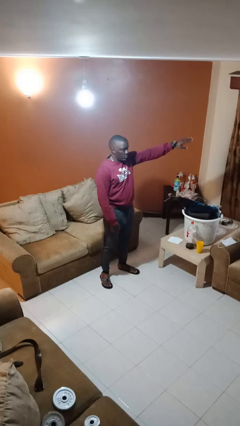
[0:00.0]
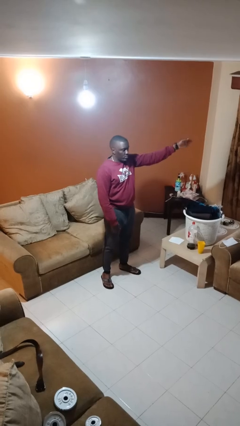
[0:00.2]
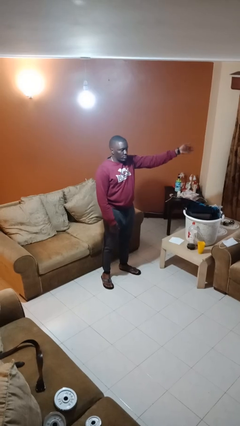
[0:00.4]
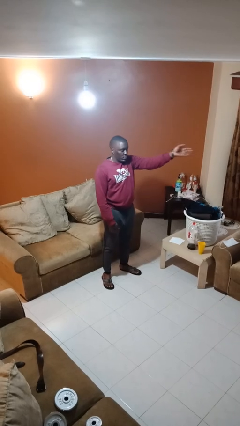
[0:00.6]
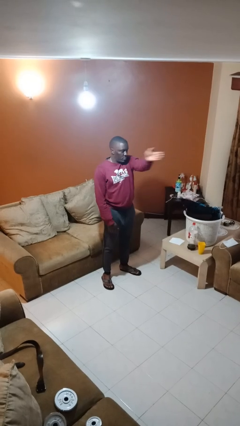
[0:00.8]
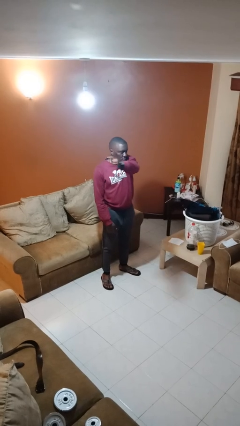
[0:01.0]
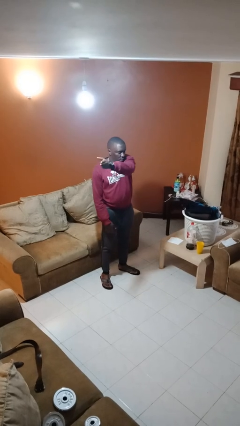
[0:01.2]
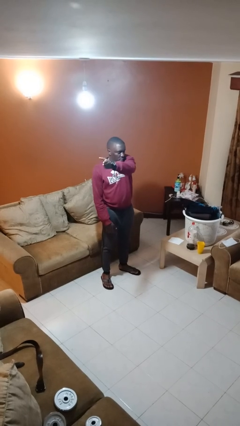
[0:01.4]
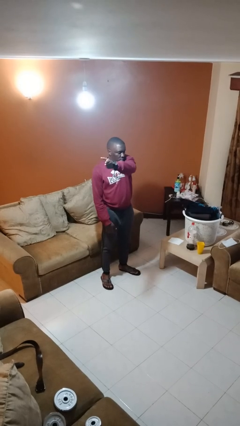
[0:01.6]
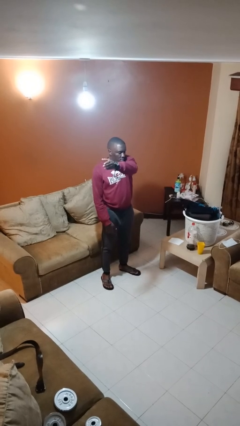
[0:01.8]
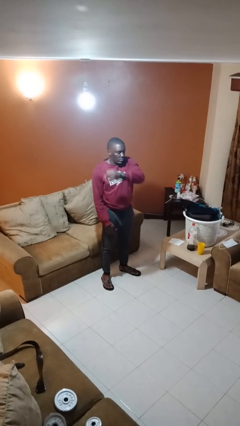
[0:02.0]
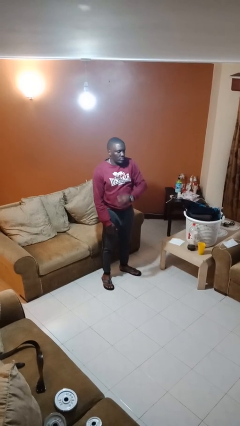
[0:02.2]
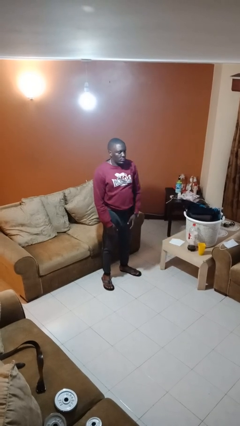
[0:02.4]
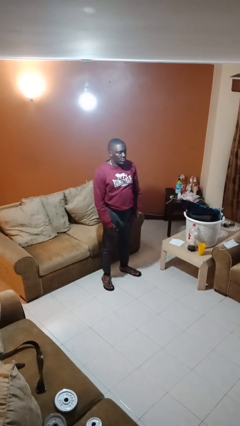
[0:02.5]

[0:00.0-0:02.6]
person gestures swipe right

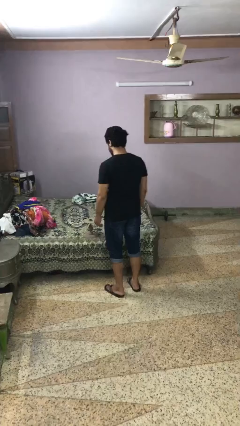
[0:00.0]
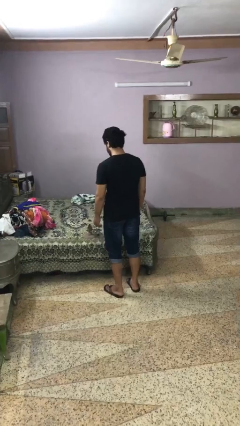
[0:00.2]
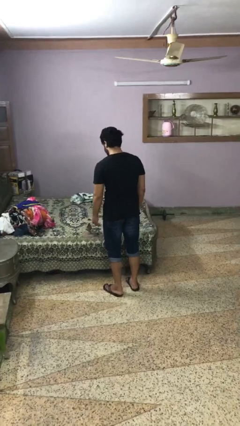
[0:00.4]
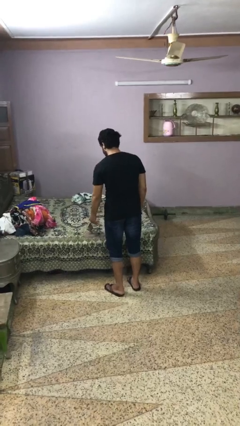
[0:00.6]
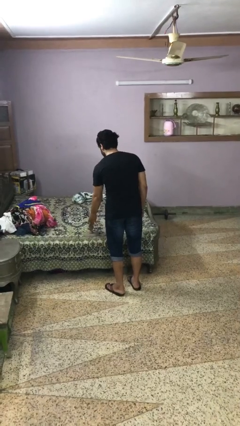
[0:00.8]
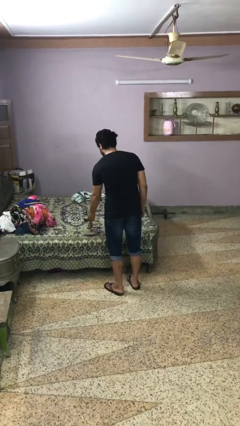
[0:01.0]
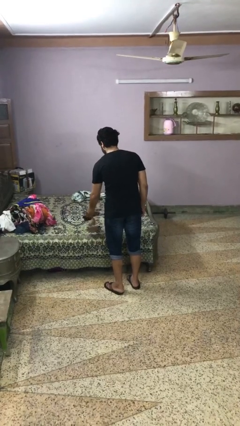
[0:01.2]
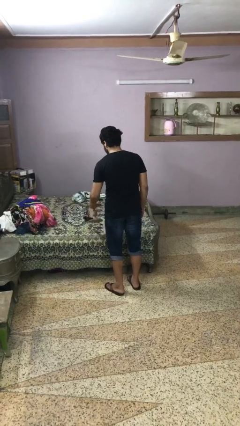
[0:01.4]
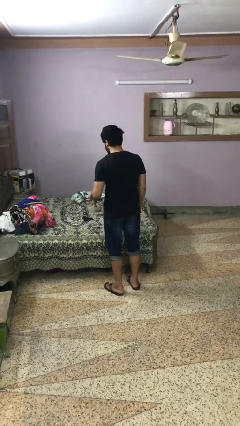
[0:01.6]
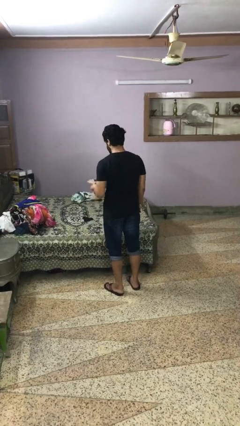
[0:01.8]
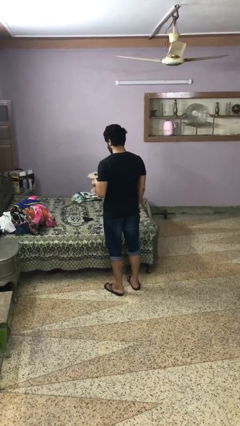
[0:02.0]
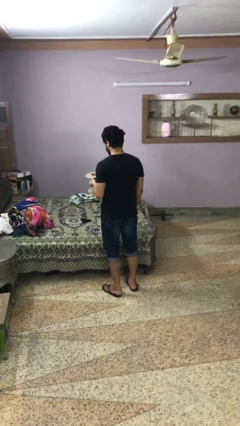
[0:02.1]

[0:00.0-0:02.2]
person picks up object from bed

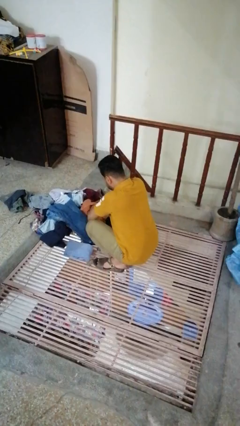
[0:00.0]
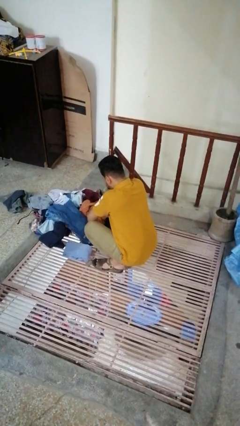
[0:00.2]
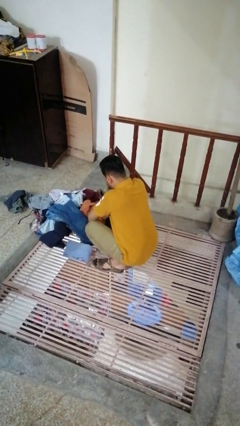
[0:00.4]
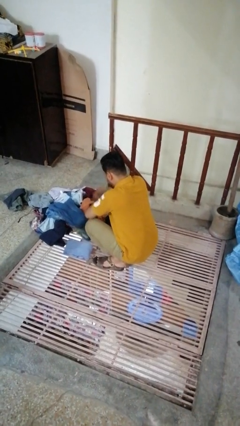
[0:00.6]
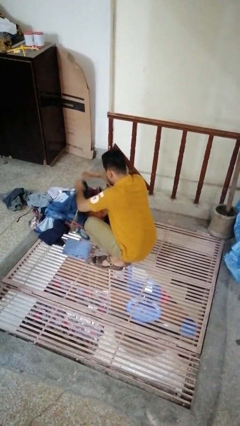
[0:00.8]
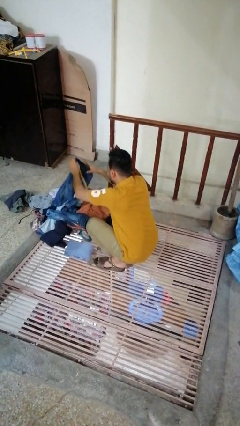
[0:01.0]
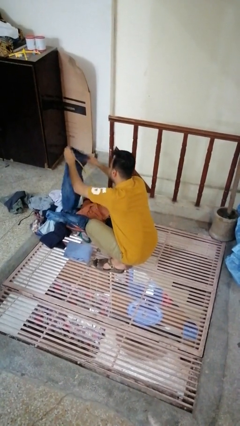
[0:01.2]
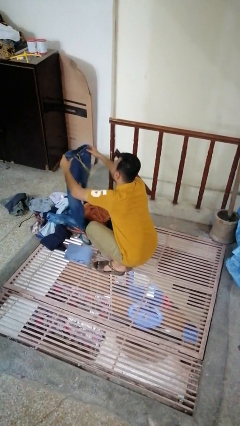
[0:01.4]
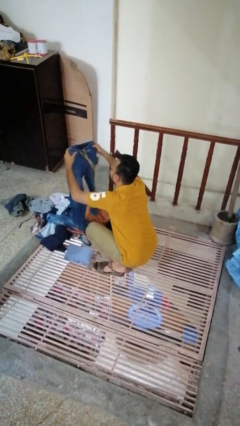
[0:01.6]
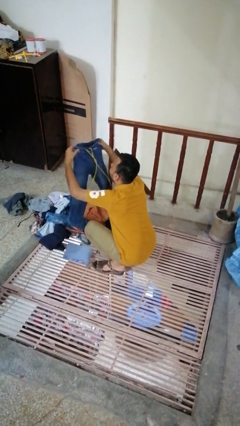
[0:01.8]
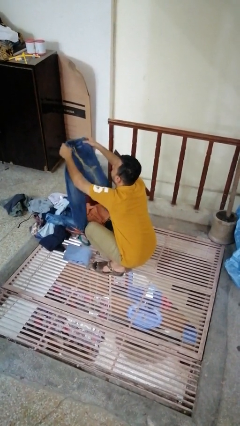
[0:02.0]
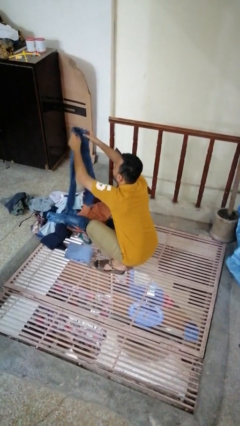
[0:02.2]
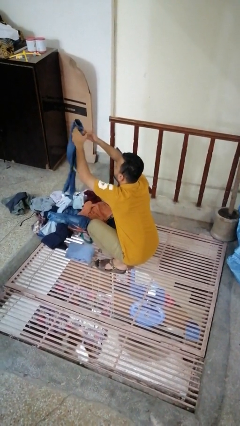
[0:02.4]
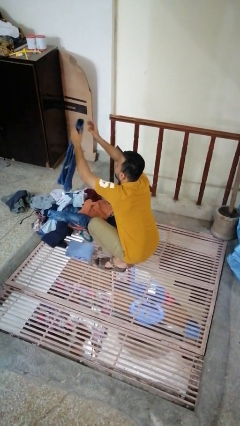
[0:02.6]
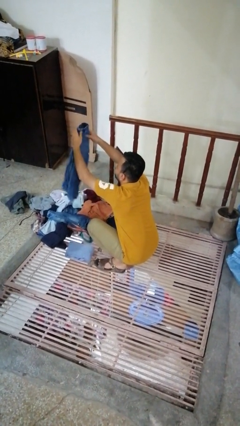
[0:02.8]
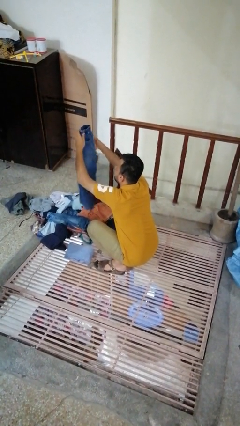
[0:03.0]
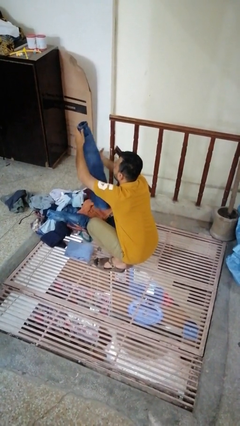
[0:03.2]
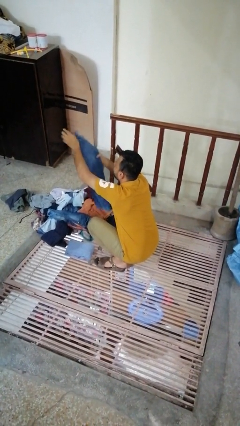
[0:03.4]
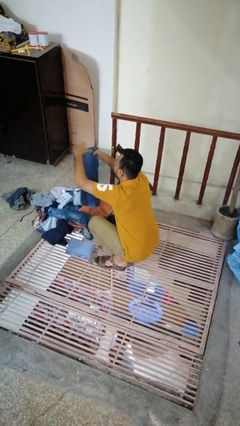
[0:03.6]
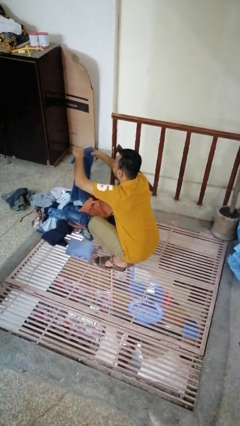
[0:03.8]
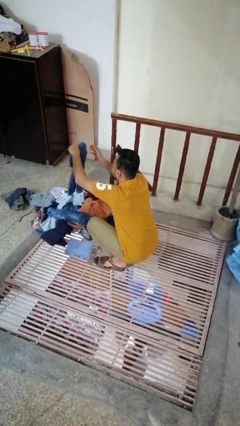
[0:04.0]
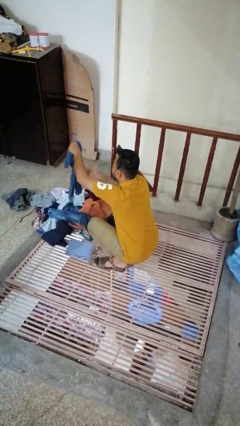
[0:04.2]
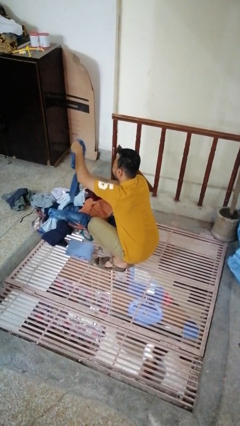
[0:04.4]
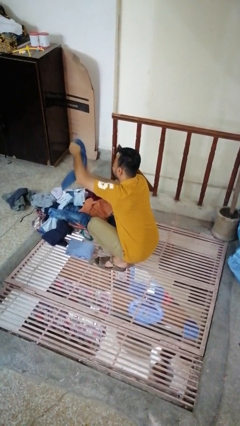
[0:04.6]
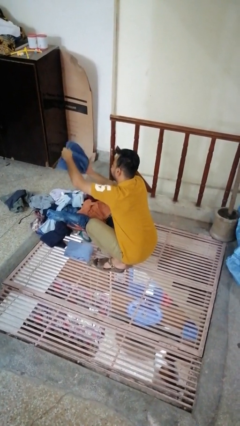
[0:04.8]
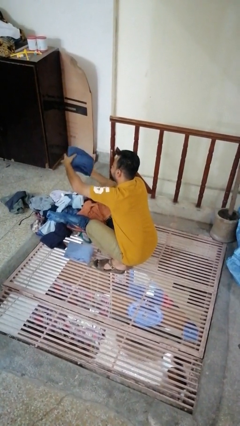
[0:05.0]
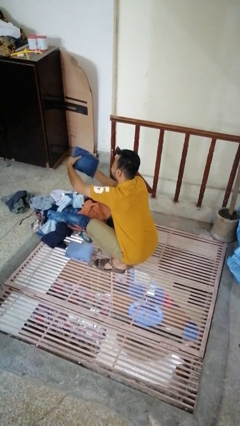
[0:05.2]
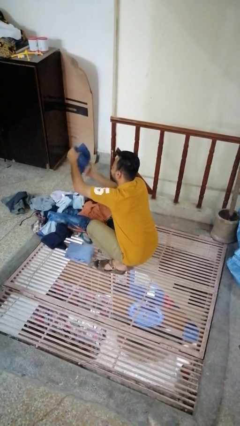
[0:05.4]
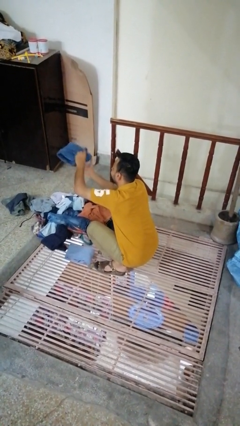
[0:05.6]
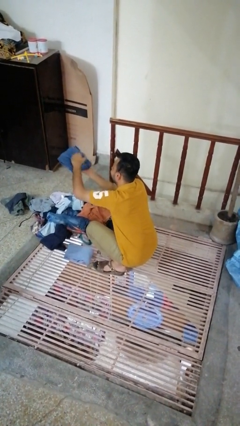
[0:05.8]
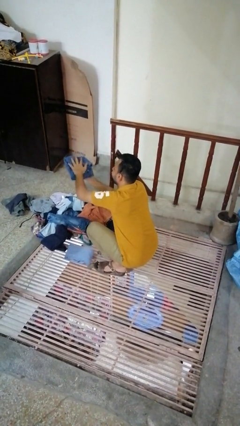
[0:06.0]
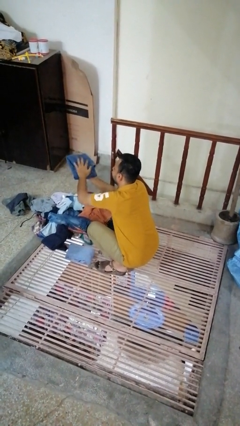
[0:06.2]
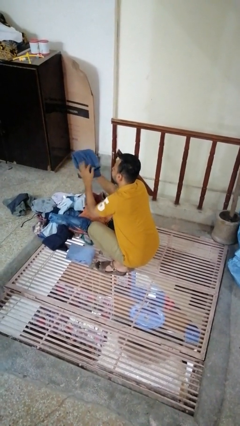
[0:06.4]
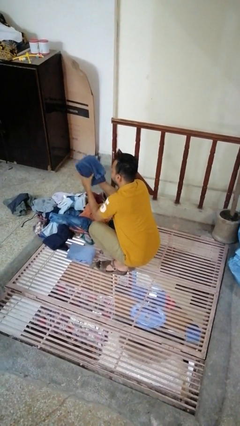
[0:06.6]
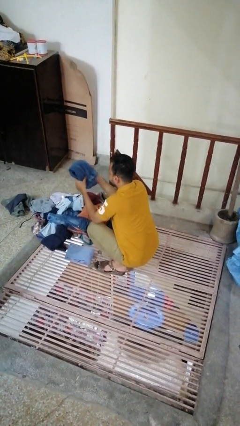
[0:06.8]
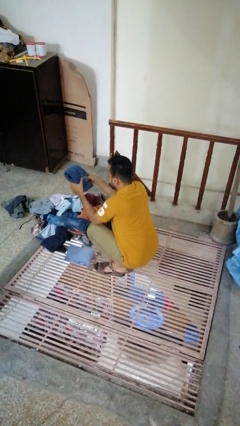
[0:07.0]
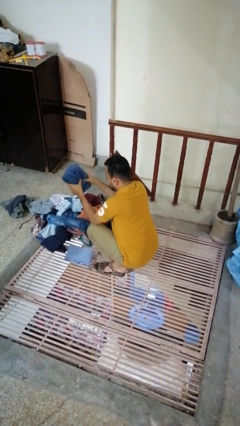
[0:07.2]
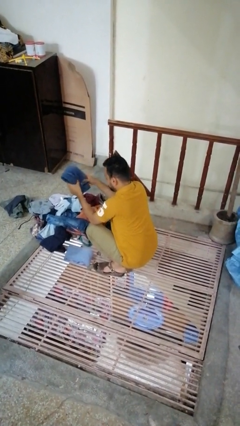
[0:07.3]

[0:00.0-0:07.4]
person folds pants

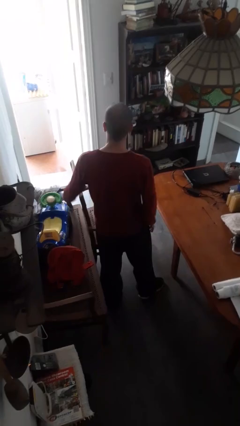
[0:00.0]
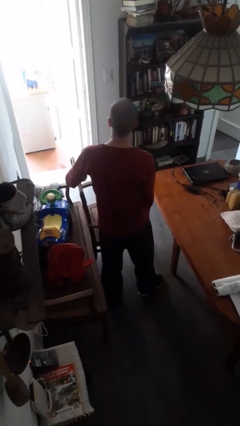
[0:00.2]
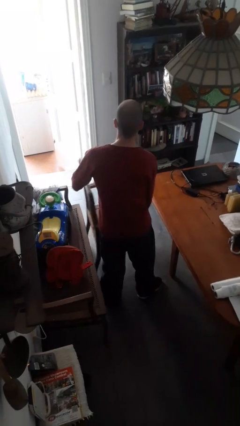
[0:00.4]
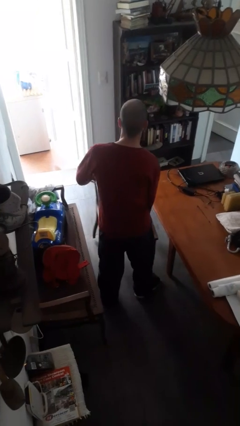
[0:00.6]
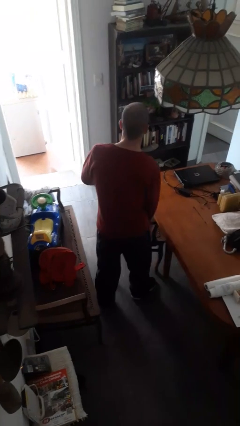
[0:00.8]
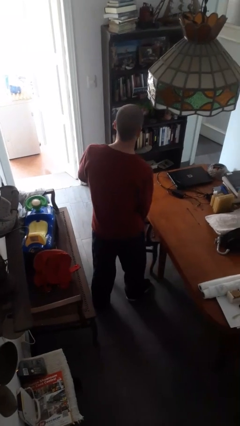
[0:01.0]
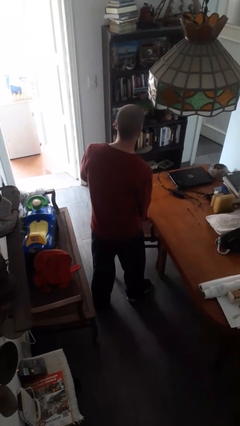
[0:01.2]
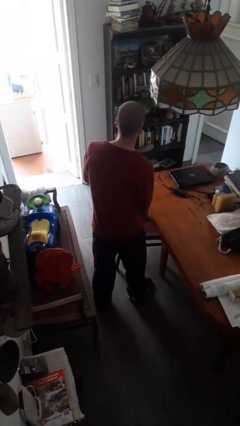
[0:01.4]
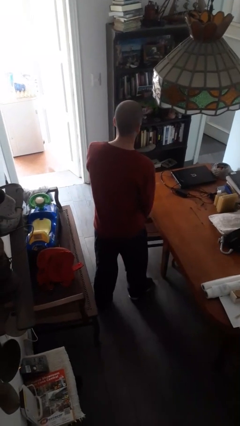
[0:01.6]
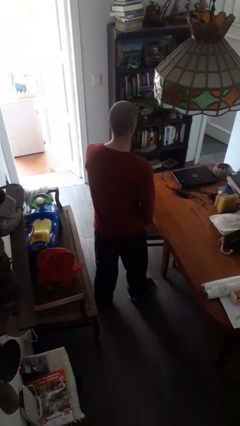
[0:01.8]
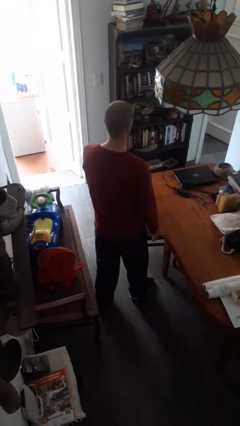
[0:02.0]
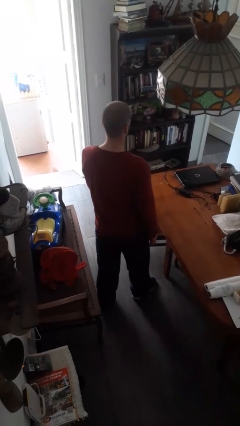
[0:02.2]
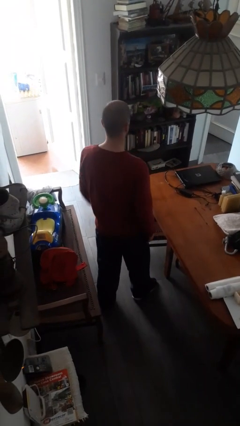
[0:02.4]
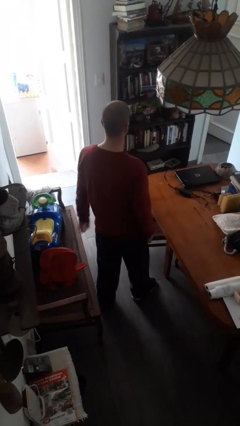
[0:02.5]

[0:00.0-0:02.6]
person pushes in chair

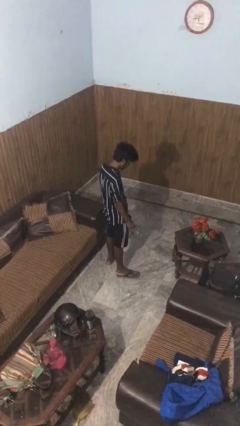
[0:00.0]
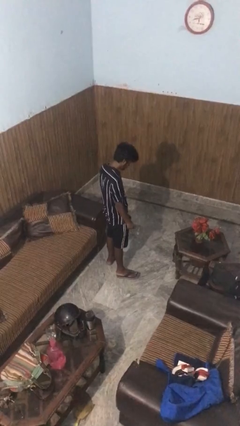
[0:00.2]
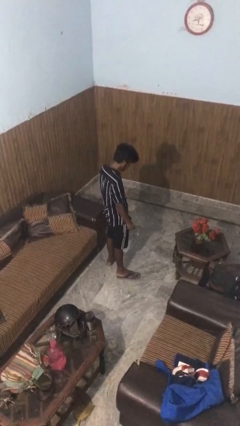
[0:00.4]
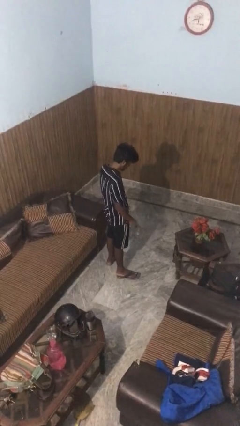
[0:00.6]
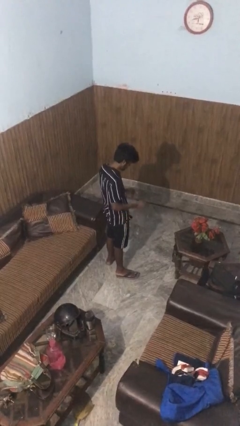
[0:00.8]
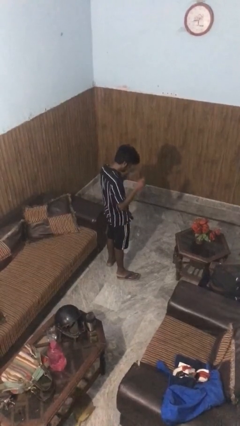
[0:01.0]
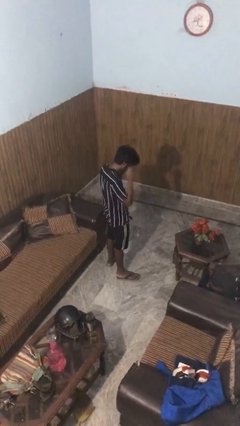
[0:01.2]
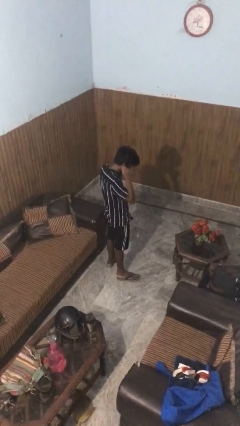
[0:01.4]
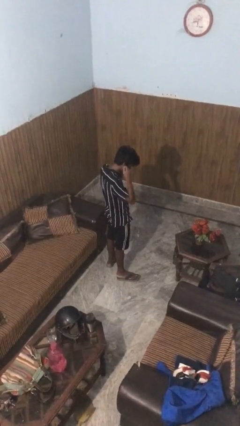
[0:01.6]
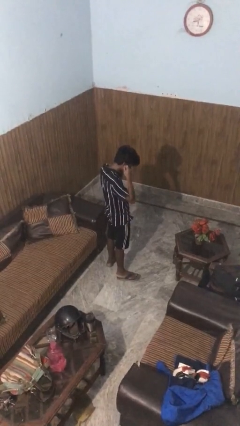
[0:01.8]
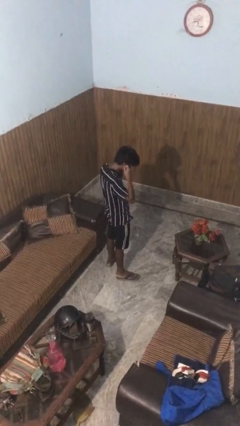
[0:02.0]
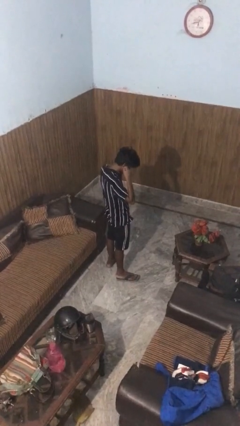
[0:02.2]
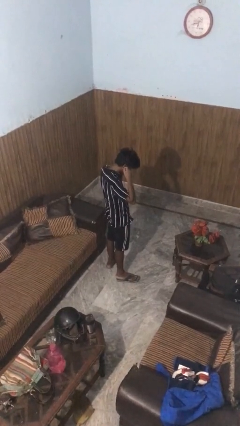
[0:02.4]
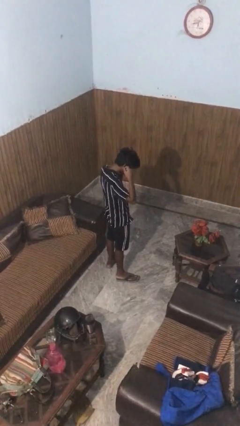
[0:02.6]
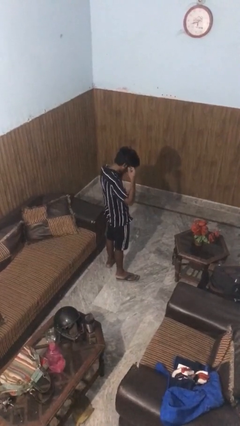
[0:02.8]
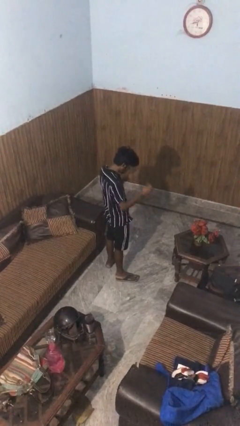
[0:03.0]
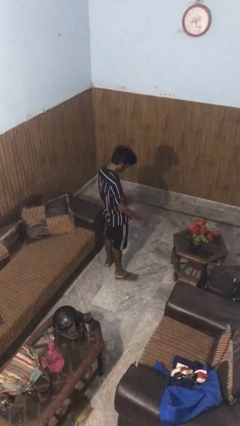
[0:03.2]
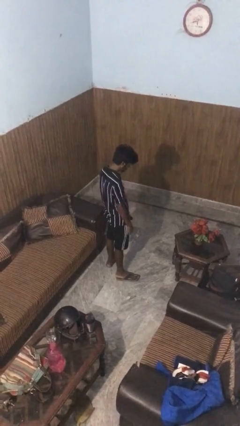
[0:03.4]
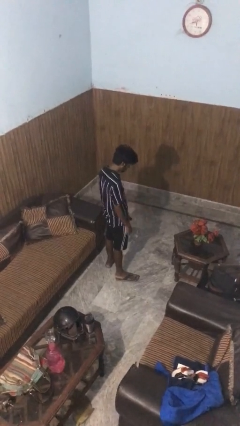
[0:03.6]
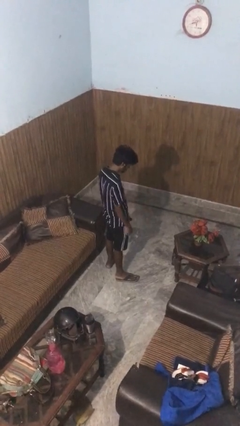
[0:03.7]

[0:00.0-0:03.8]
person puts on headphones
